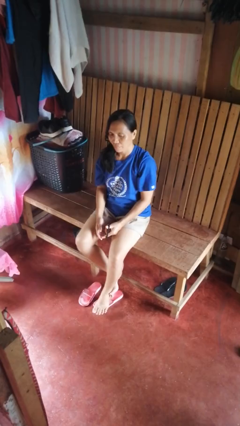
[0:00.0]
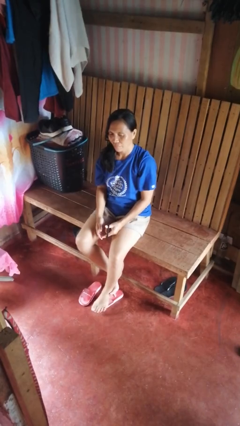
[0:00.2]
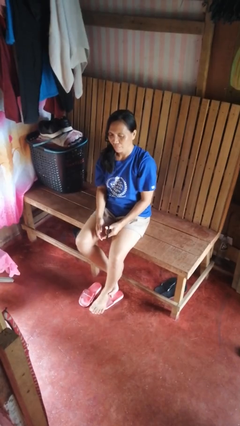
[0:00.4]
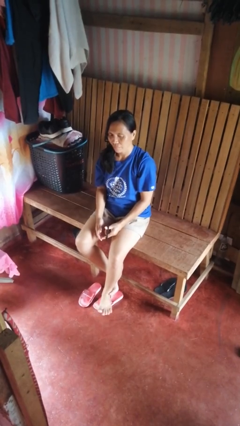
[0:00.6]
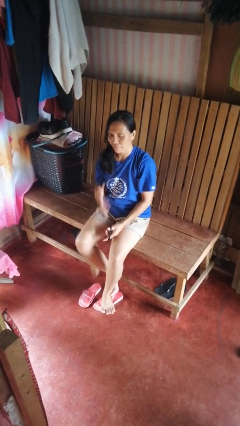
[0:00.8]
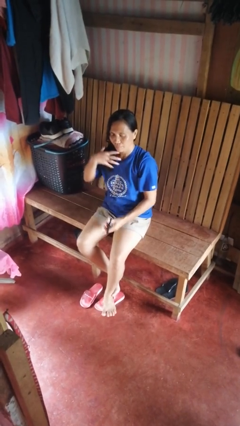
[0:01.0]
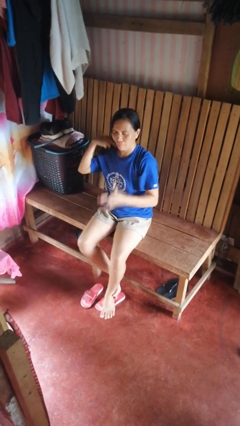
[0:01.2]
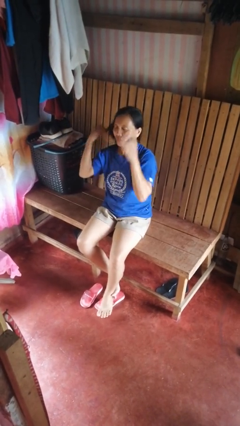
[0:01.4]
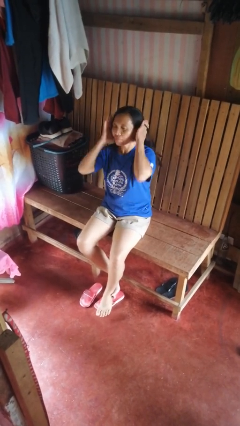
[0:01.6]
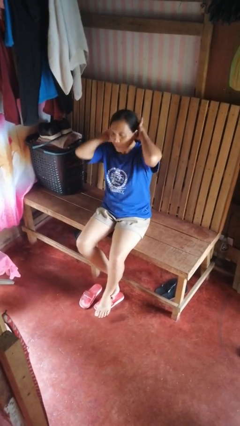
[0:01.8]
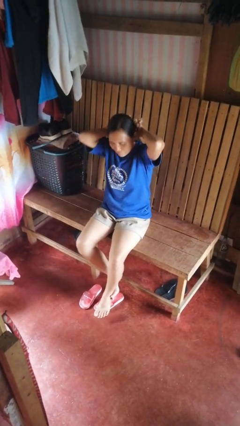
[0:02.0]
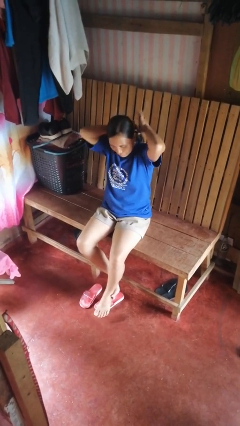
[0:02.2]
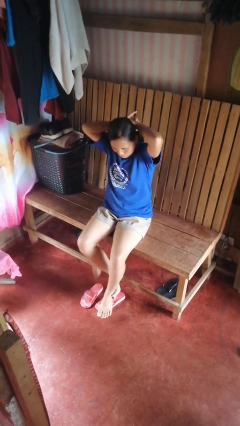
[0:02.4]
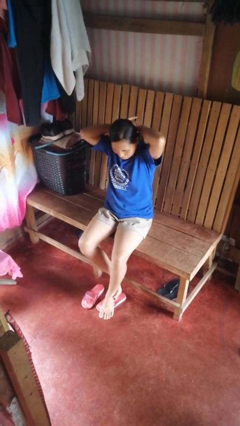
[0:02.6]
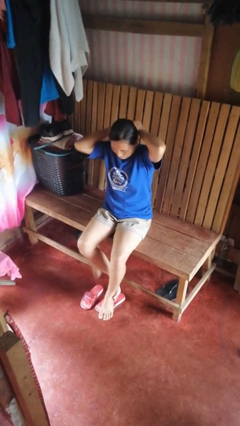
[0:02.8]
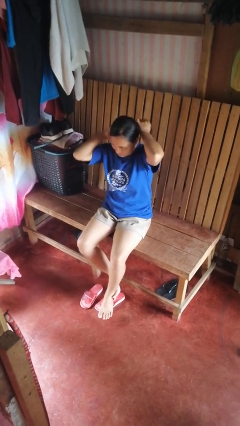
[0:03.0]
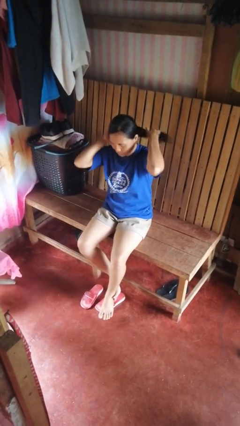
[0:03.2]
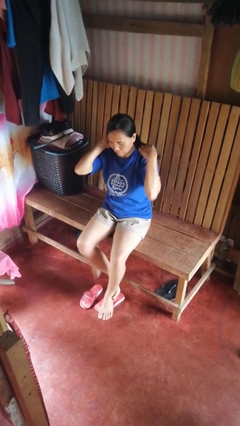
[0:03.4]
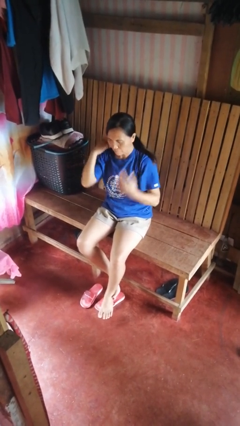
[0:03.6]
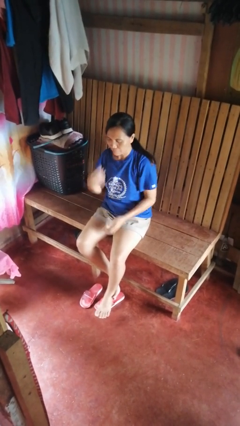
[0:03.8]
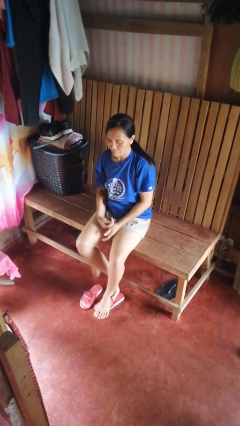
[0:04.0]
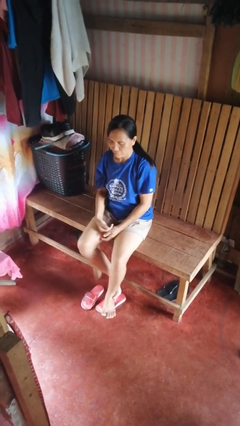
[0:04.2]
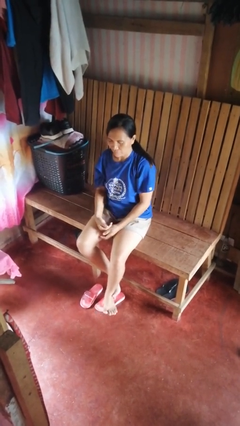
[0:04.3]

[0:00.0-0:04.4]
person puts hair in ponytail

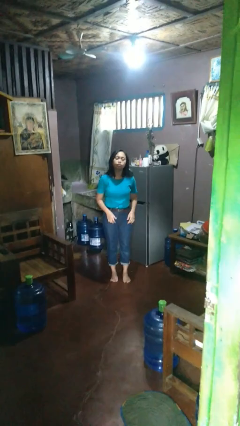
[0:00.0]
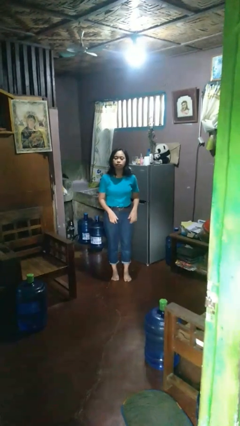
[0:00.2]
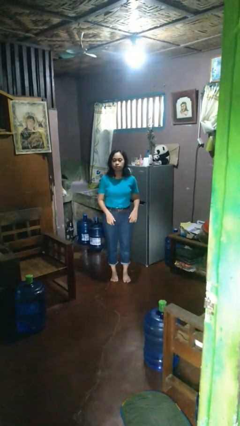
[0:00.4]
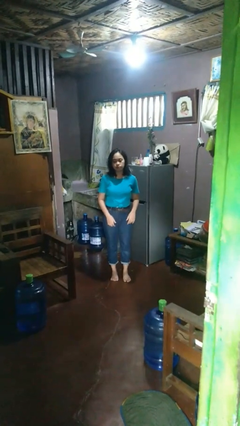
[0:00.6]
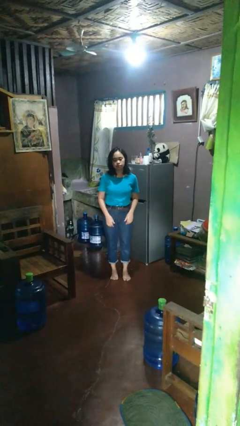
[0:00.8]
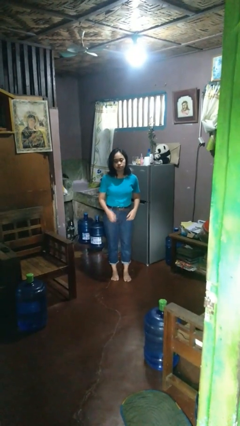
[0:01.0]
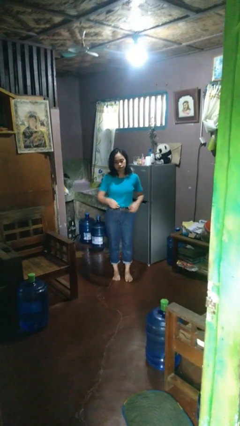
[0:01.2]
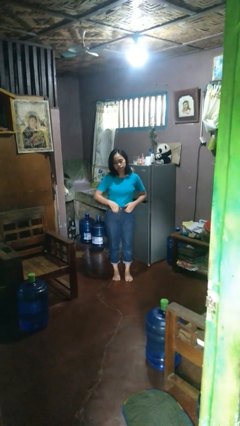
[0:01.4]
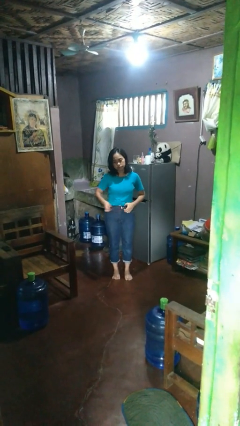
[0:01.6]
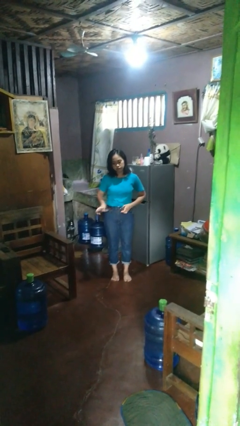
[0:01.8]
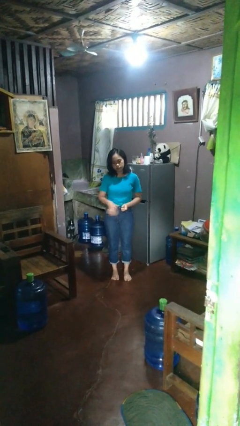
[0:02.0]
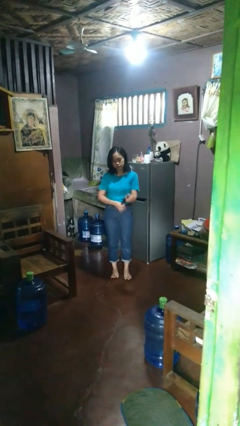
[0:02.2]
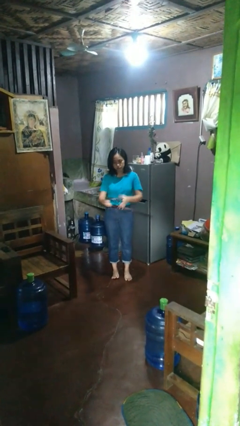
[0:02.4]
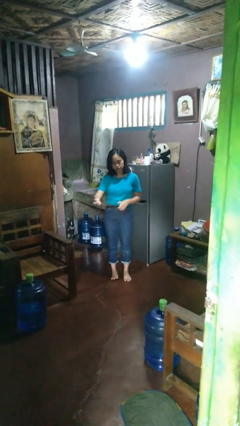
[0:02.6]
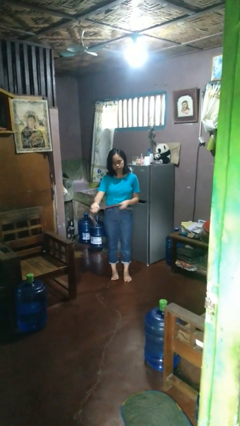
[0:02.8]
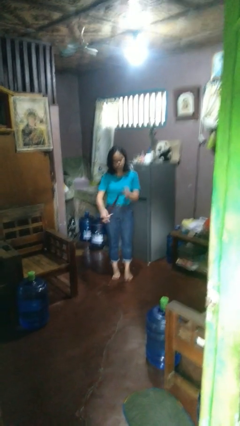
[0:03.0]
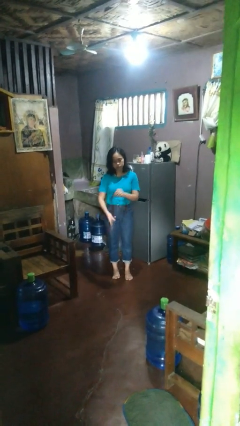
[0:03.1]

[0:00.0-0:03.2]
person takes off belt

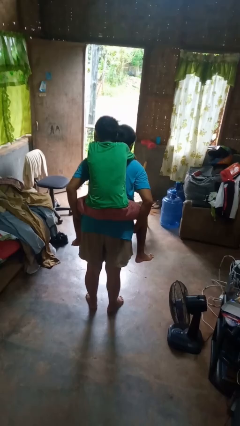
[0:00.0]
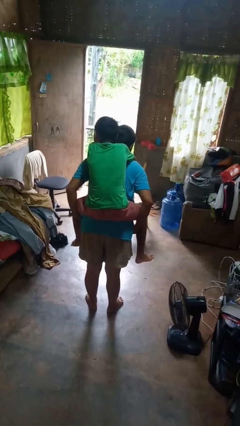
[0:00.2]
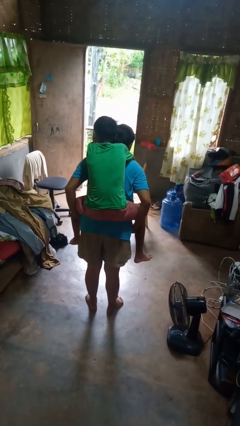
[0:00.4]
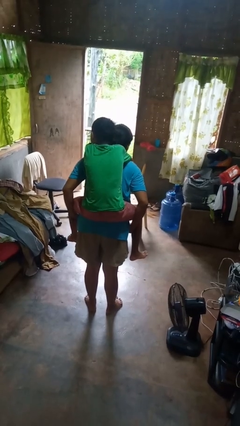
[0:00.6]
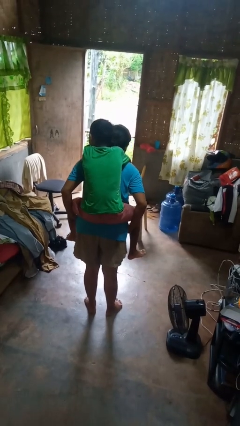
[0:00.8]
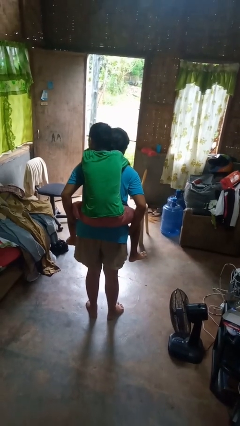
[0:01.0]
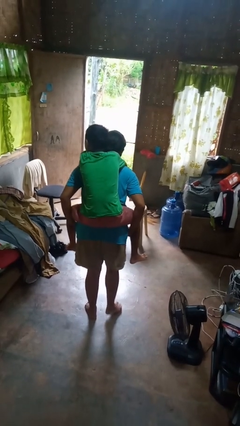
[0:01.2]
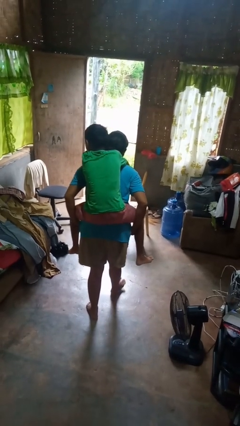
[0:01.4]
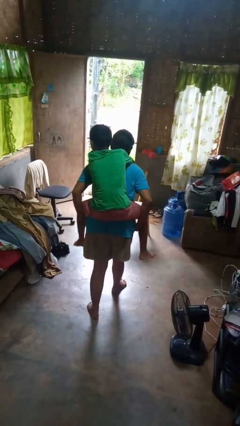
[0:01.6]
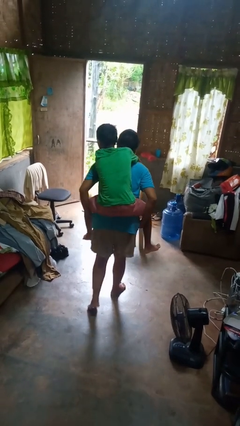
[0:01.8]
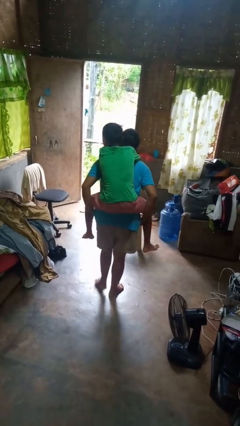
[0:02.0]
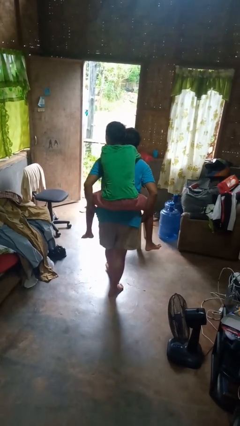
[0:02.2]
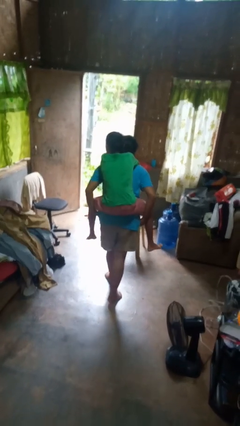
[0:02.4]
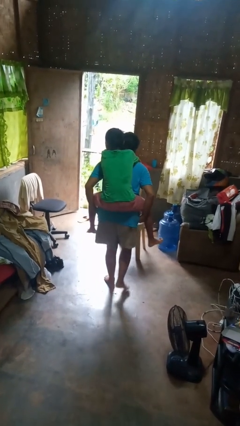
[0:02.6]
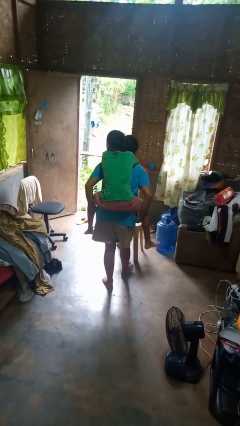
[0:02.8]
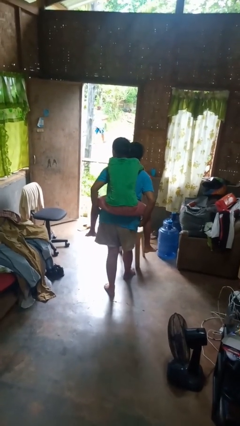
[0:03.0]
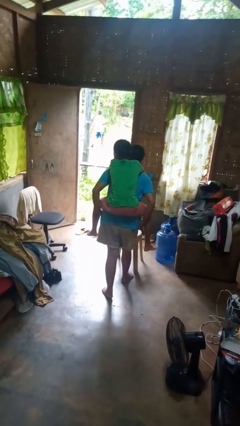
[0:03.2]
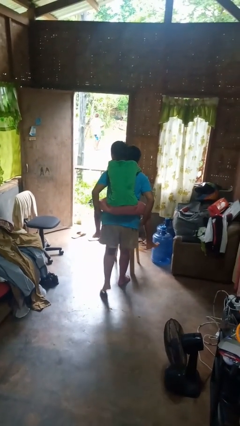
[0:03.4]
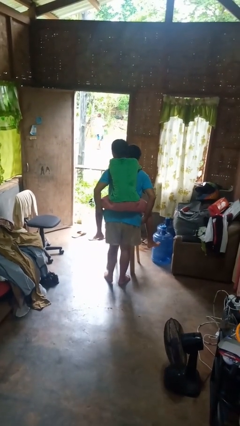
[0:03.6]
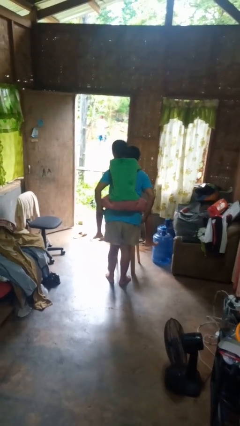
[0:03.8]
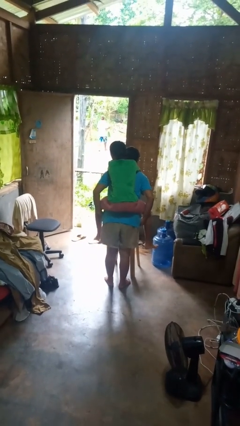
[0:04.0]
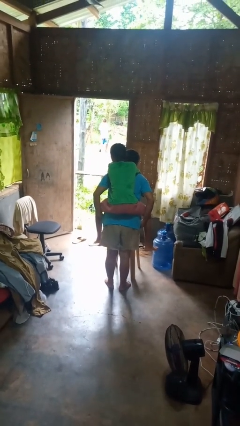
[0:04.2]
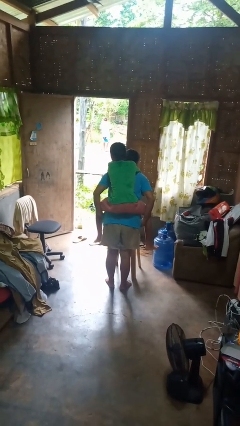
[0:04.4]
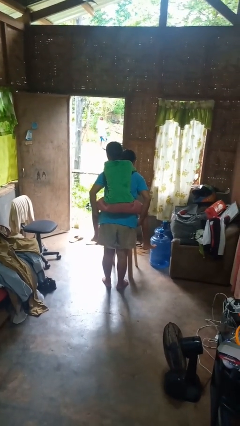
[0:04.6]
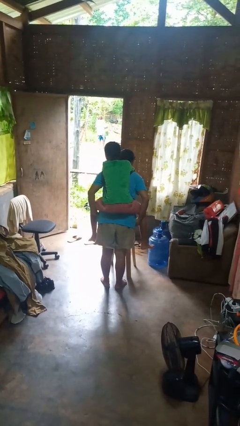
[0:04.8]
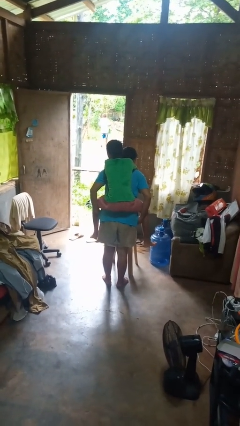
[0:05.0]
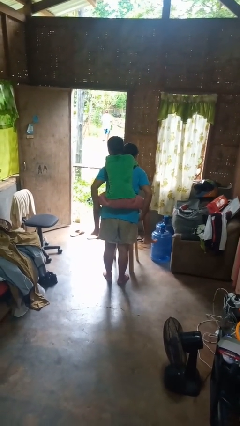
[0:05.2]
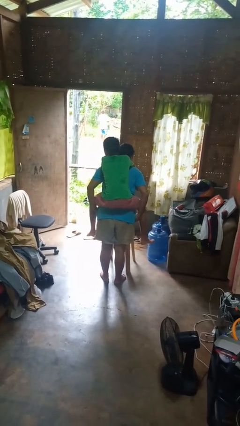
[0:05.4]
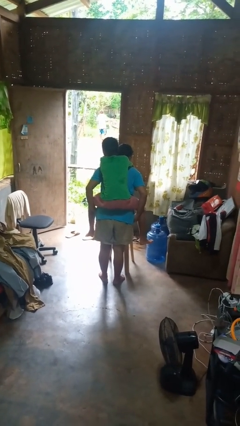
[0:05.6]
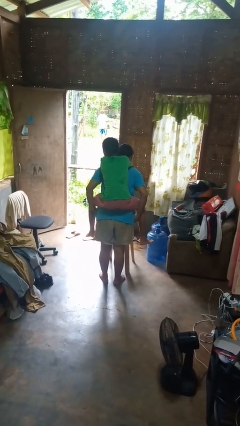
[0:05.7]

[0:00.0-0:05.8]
person carries person on back

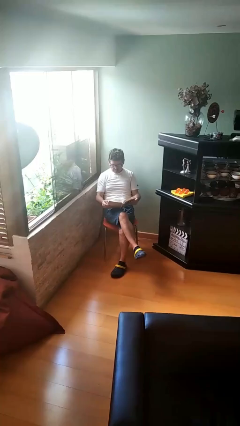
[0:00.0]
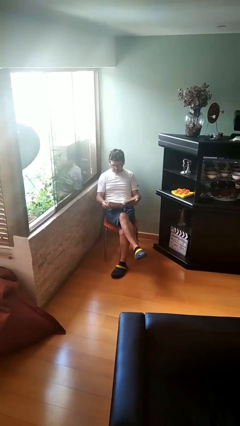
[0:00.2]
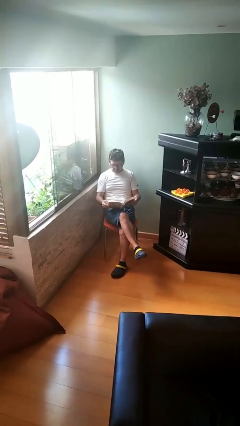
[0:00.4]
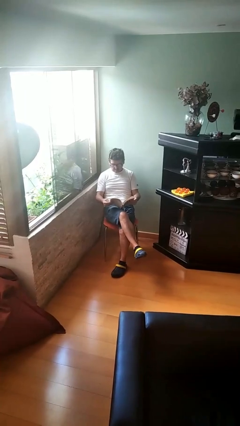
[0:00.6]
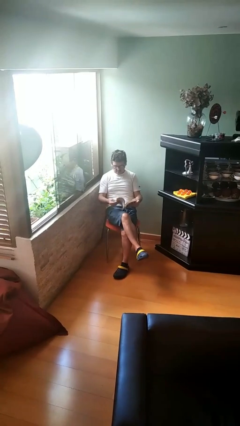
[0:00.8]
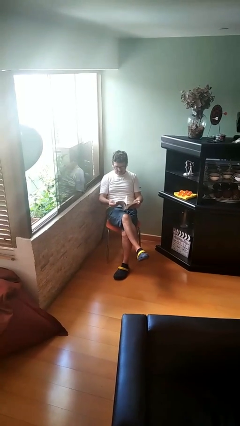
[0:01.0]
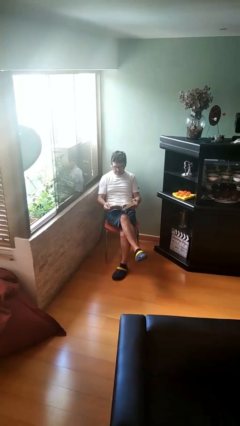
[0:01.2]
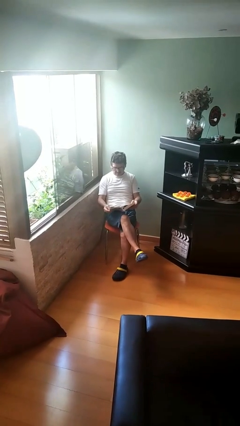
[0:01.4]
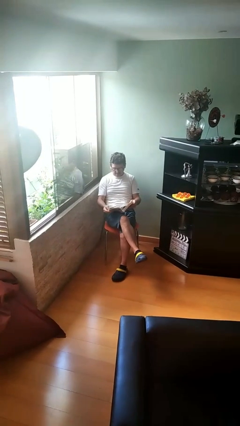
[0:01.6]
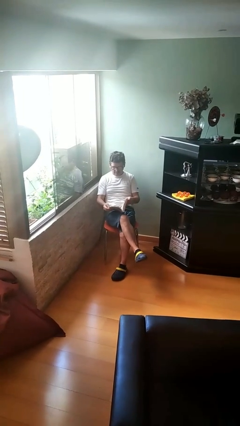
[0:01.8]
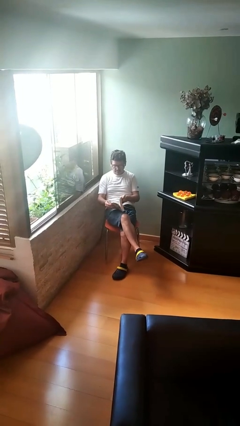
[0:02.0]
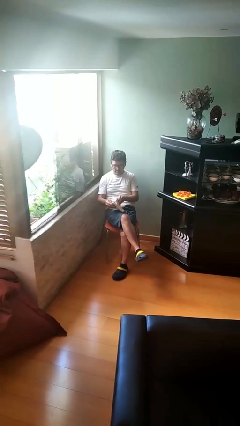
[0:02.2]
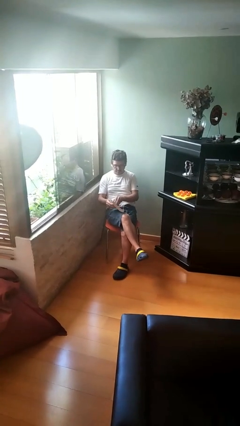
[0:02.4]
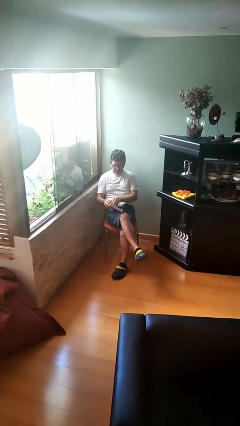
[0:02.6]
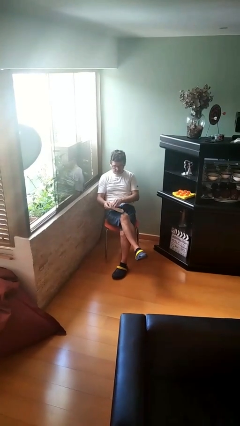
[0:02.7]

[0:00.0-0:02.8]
person reads document

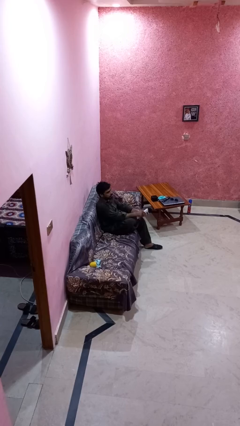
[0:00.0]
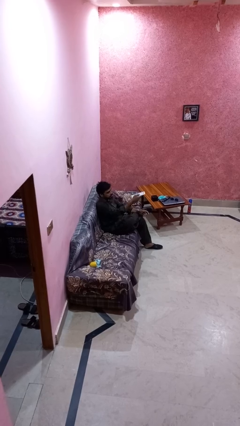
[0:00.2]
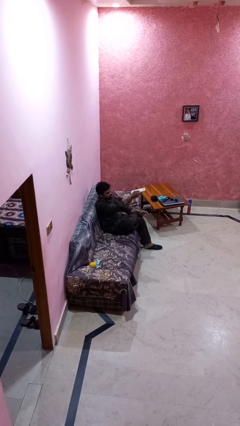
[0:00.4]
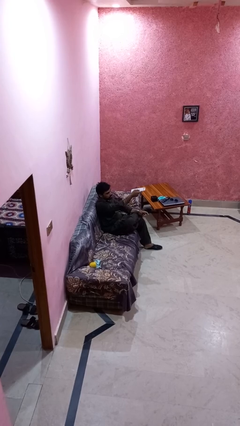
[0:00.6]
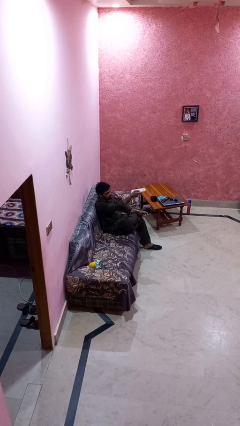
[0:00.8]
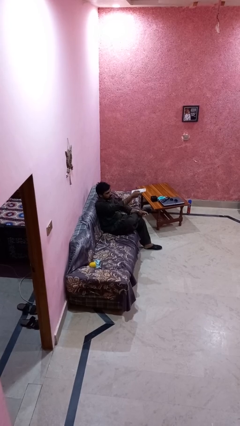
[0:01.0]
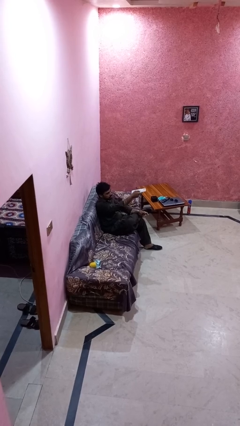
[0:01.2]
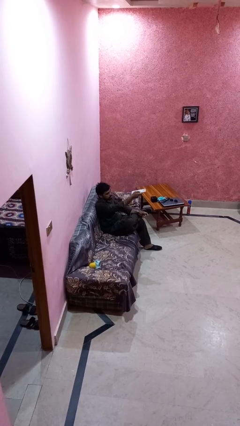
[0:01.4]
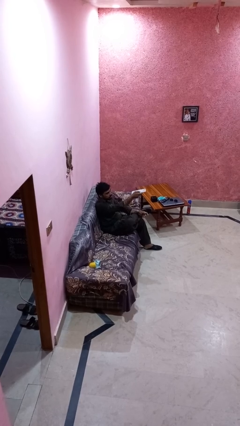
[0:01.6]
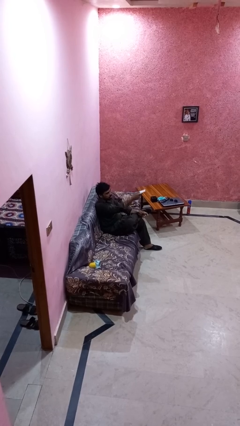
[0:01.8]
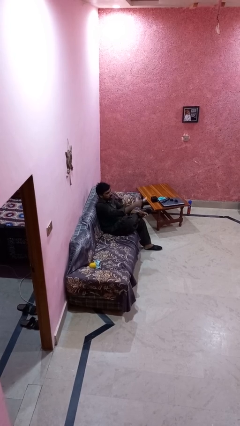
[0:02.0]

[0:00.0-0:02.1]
person uses television remote
